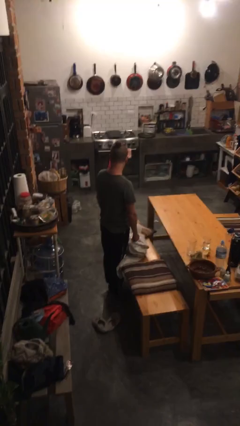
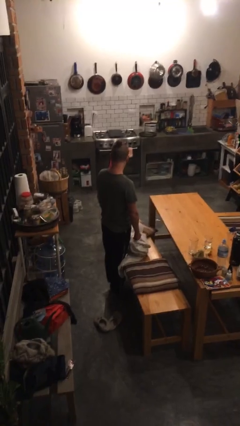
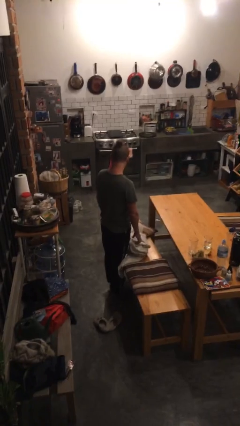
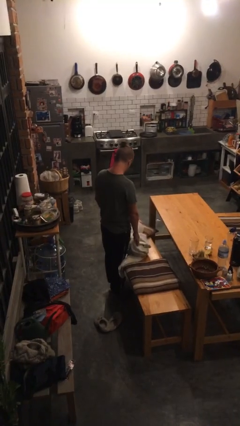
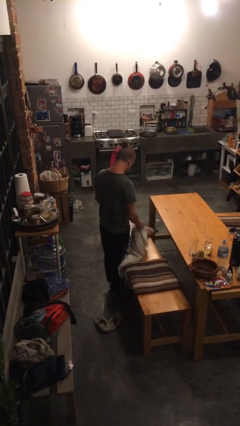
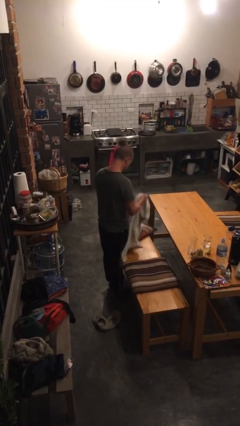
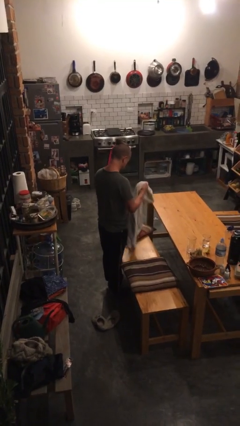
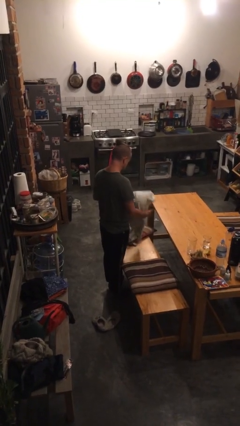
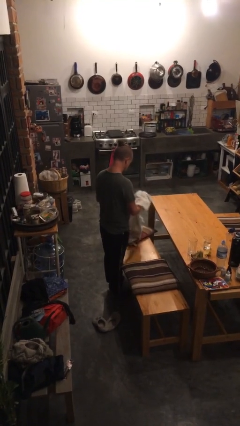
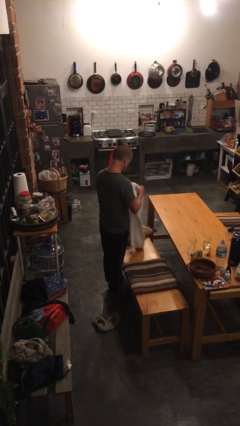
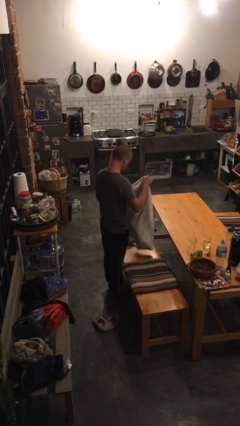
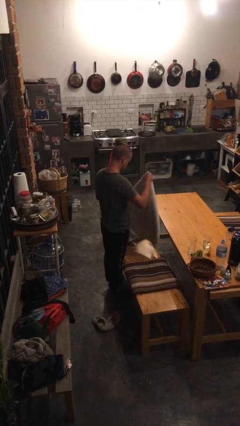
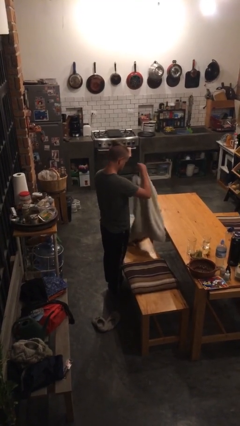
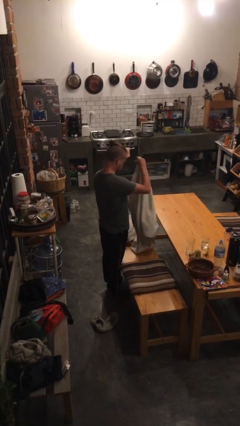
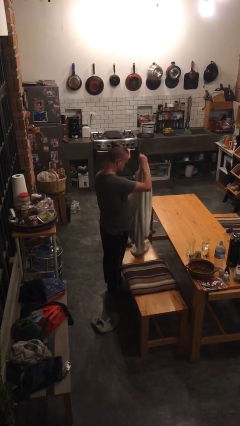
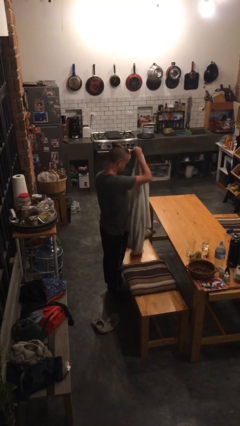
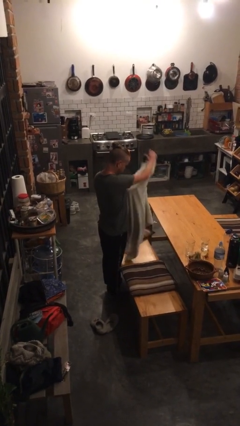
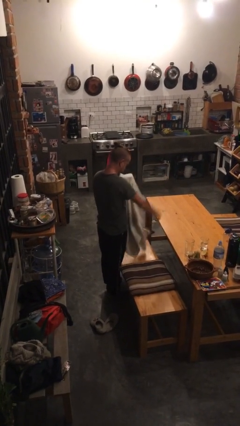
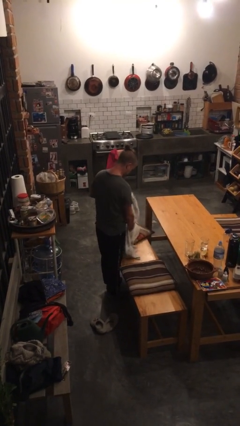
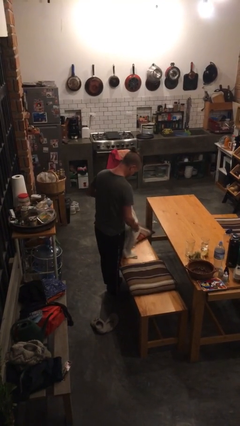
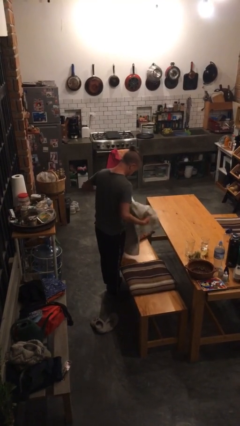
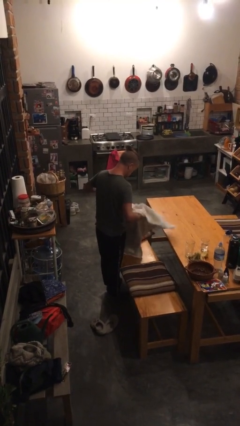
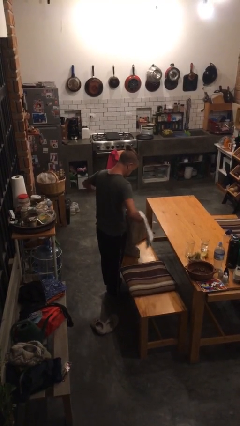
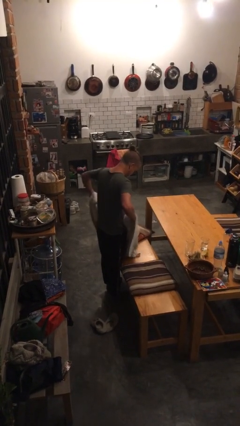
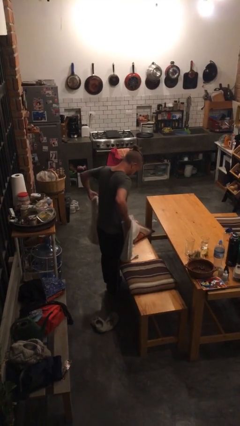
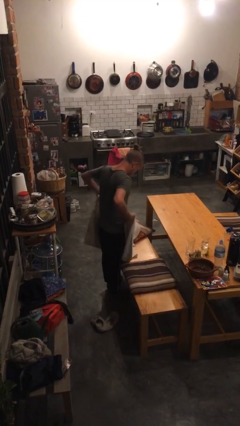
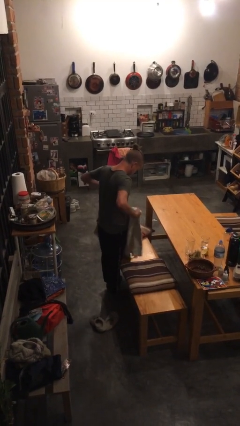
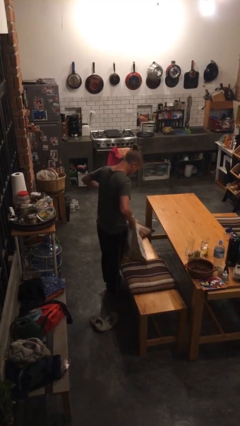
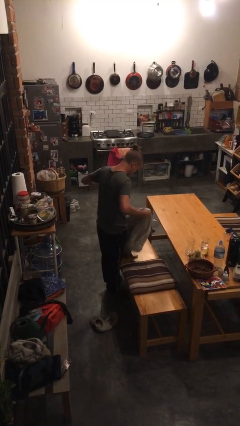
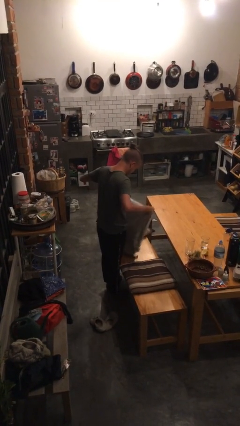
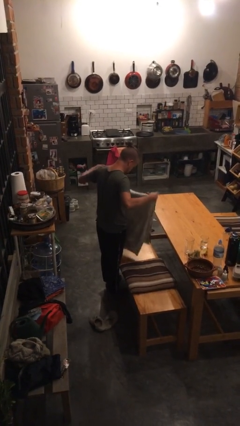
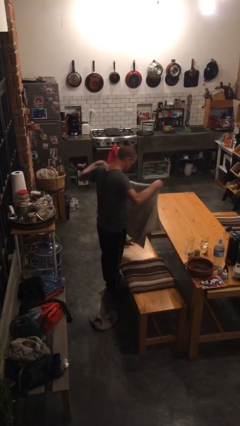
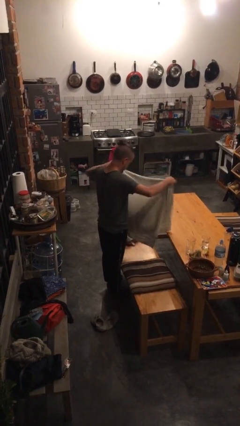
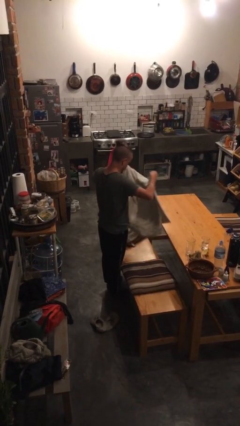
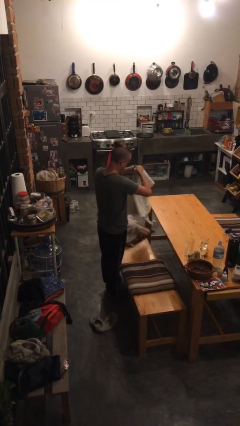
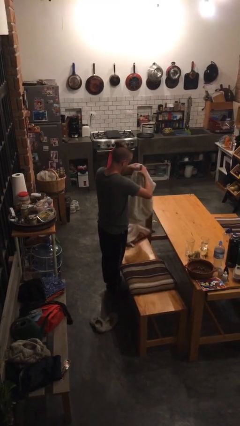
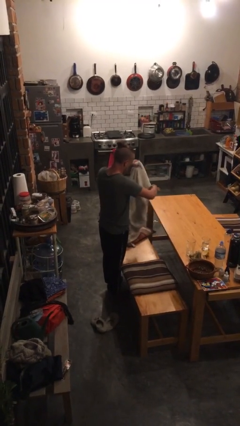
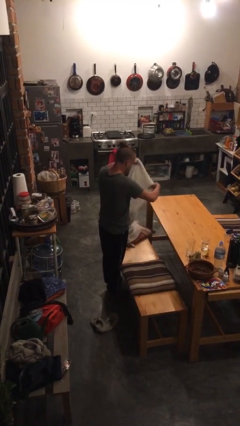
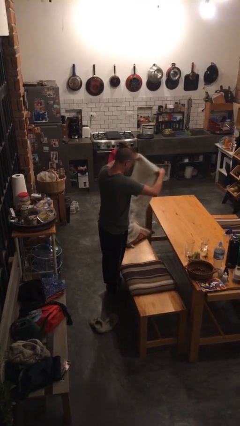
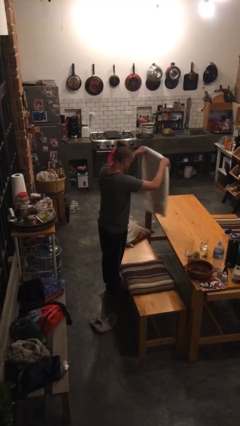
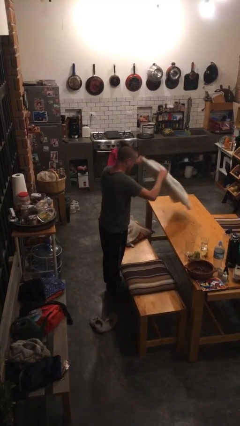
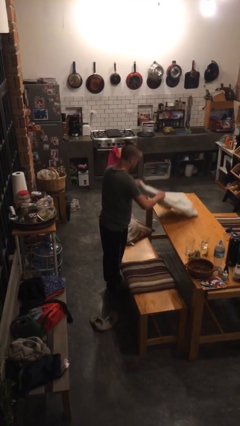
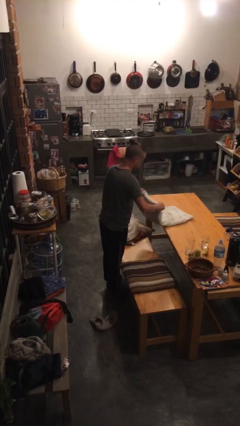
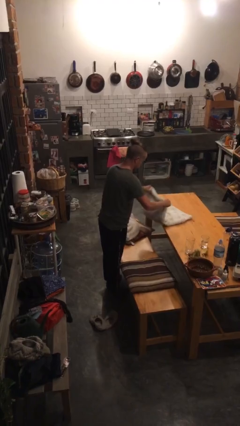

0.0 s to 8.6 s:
person folds towel

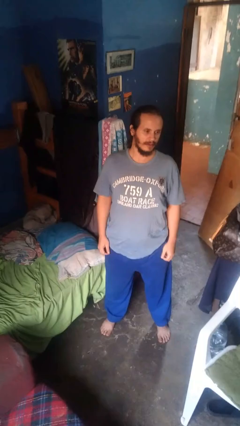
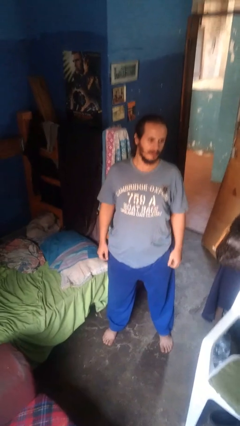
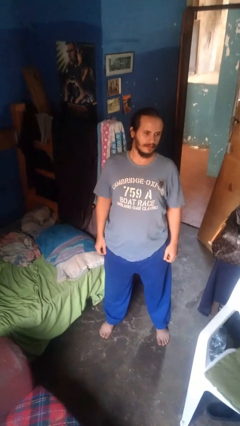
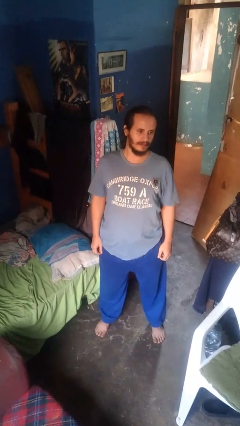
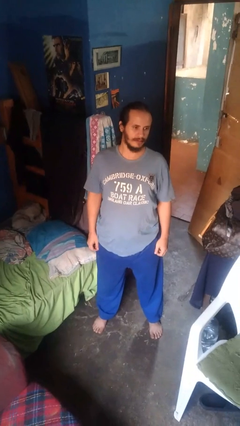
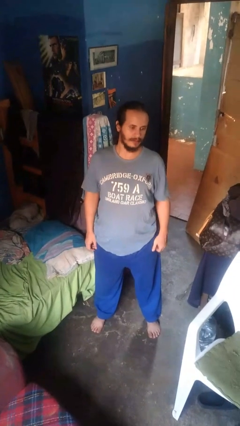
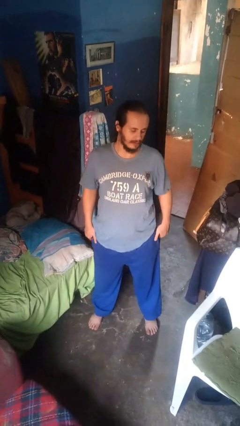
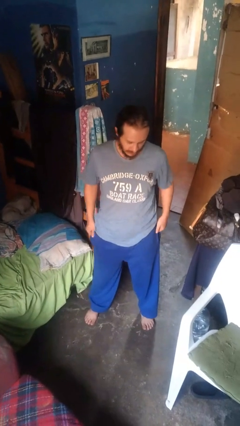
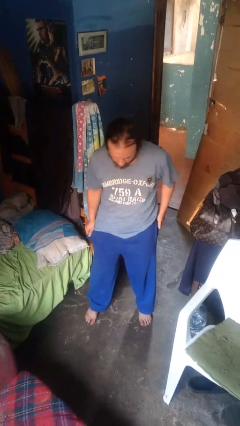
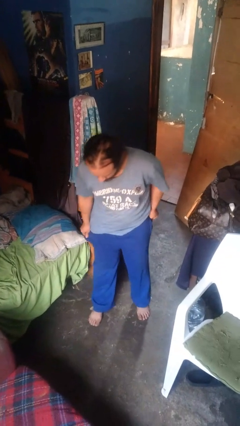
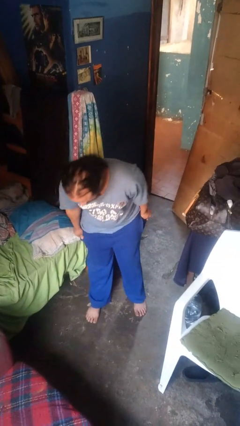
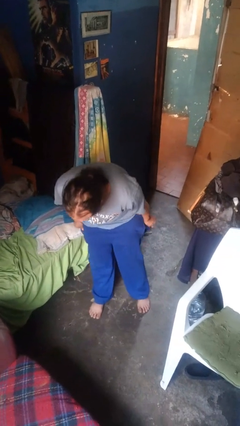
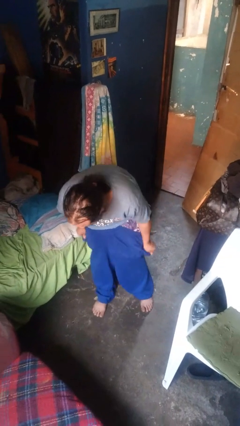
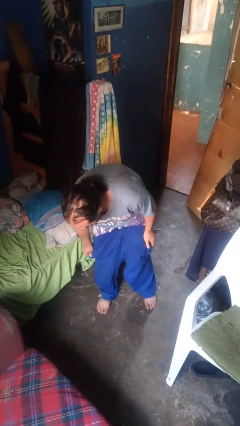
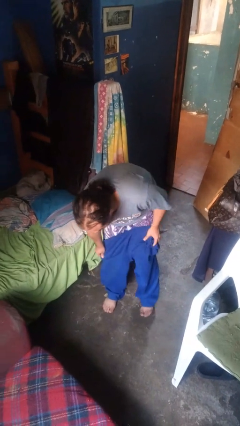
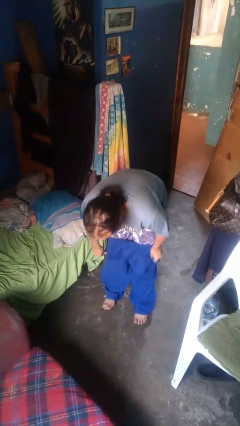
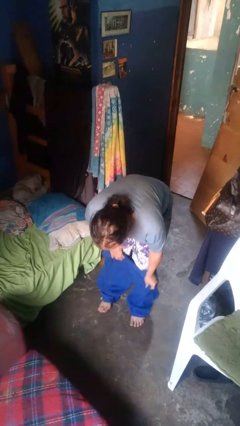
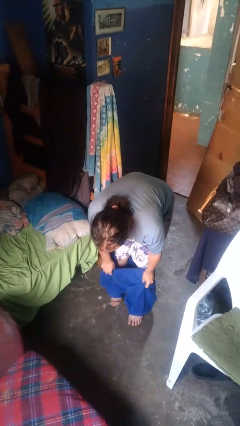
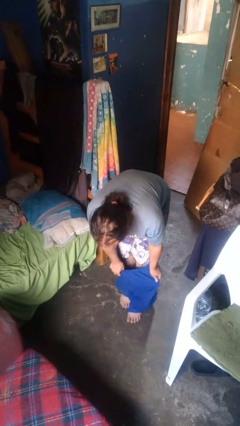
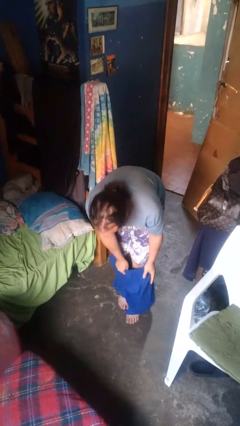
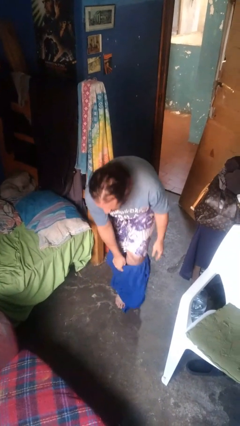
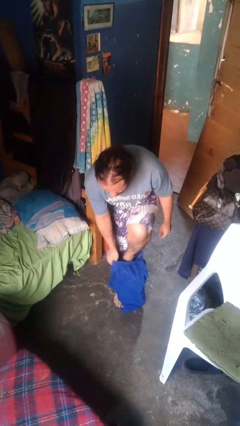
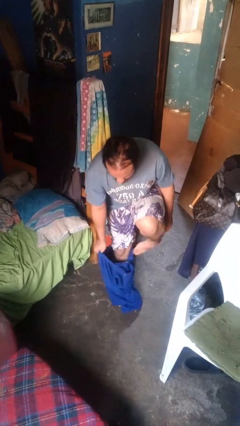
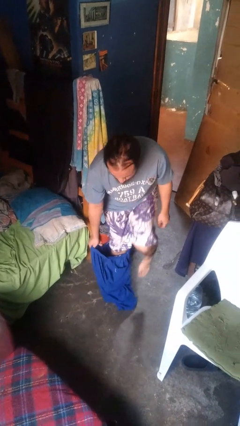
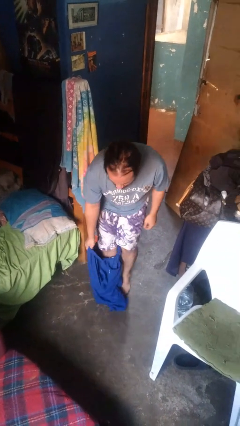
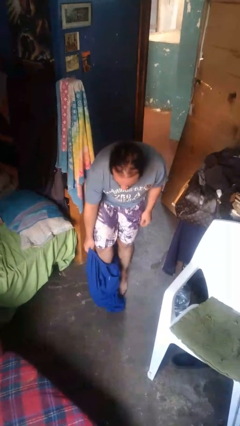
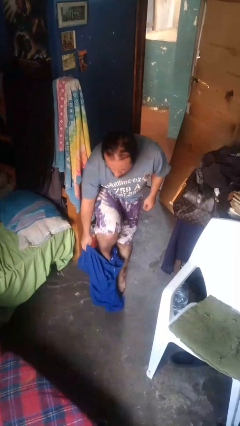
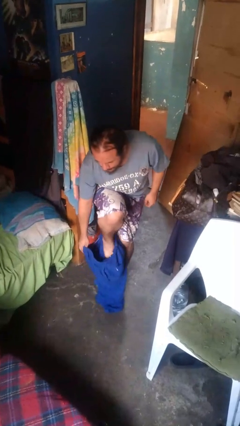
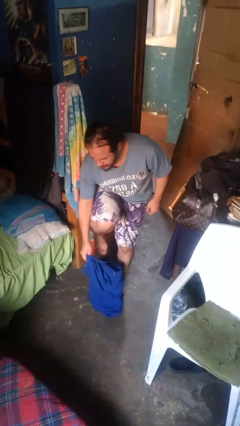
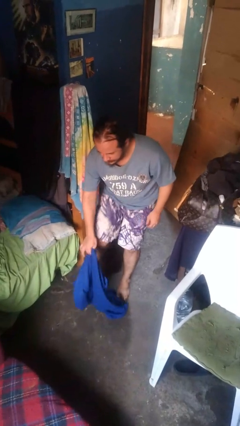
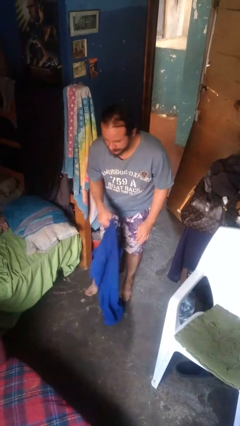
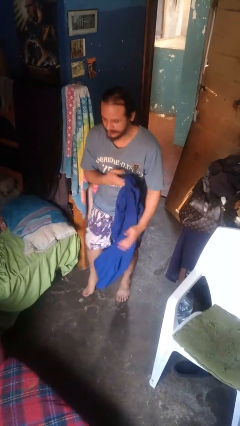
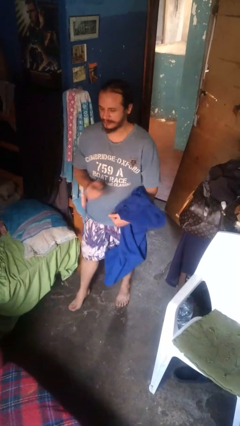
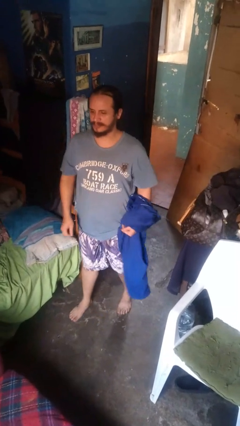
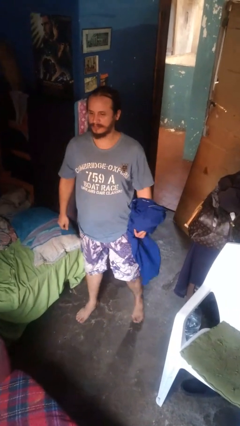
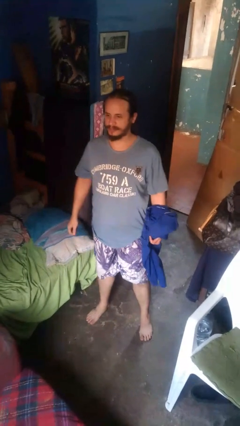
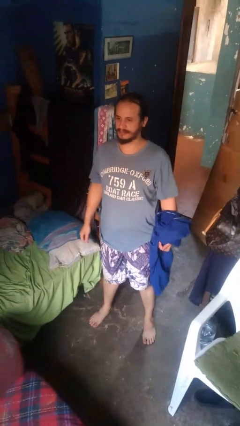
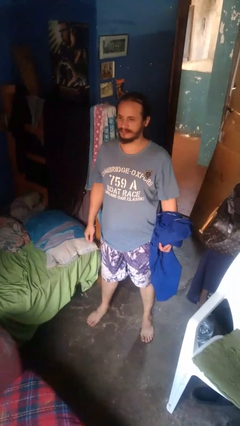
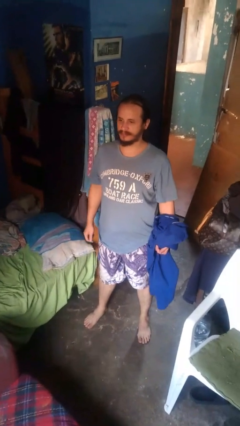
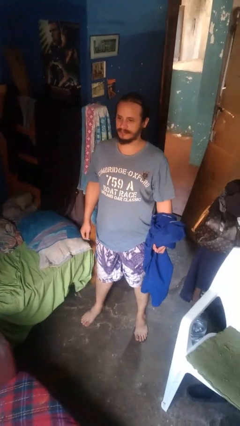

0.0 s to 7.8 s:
person takes off pants

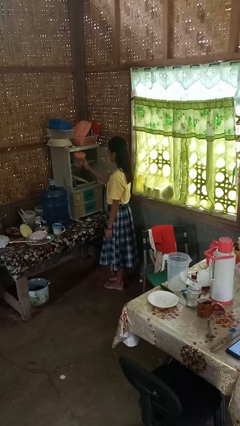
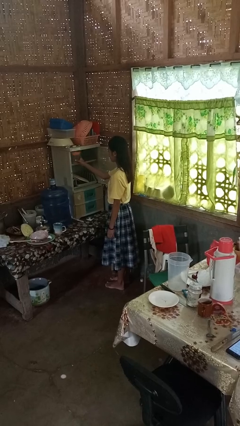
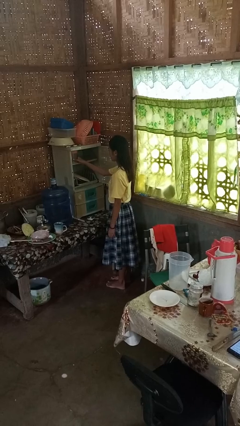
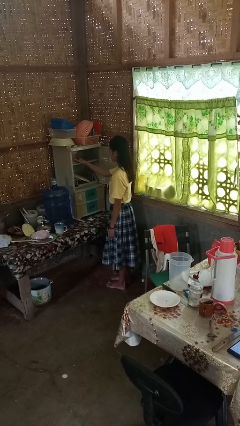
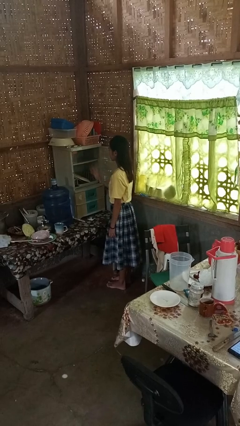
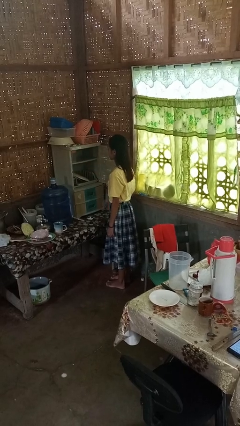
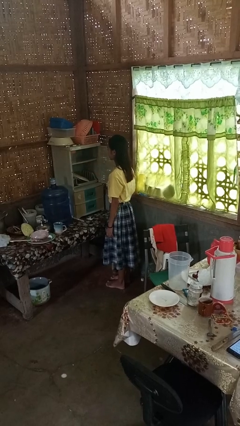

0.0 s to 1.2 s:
person puts down object into cabinet

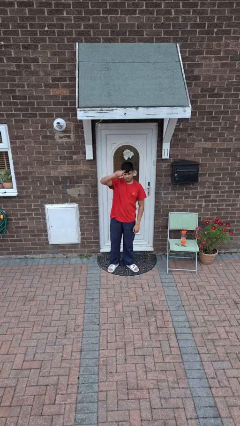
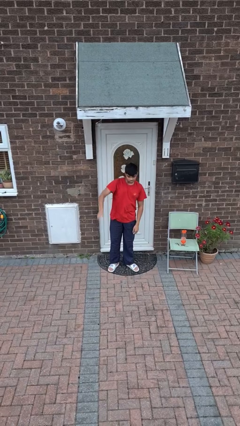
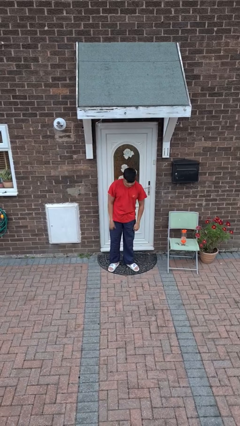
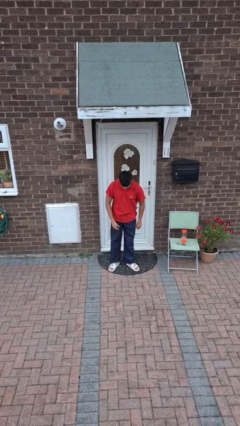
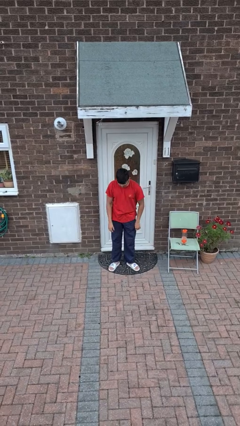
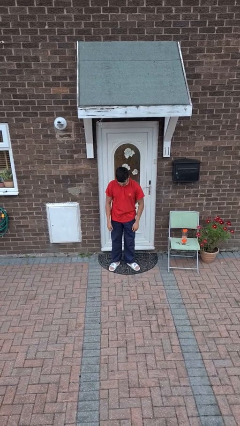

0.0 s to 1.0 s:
person gestures lower hand
